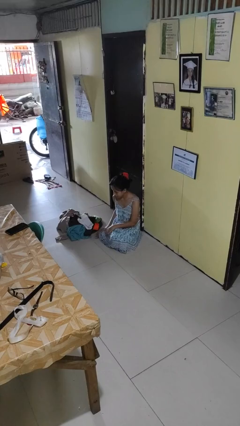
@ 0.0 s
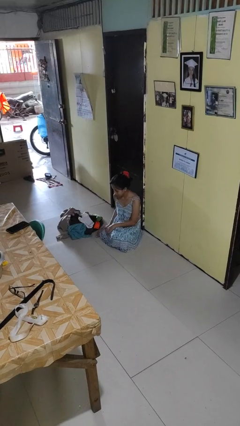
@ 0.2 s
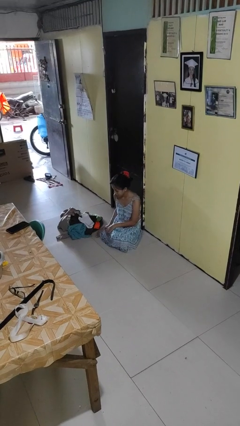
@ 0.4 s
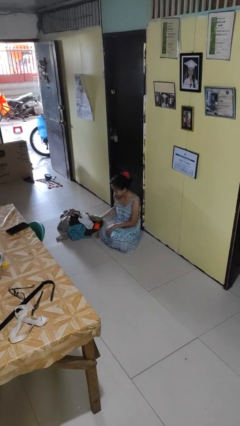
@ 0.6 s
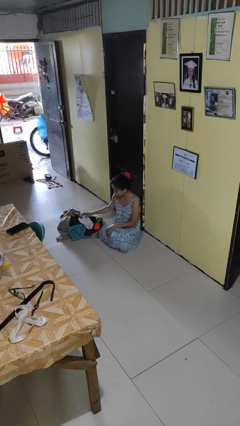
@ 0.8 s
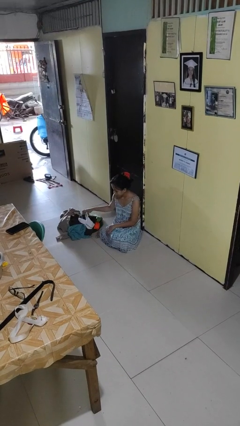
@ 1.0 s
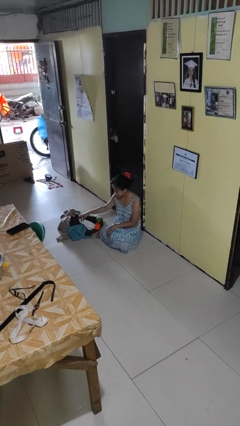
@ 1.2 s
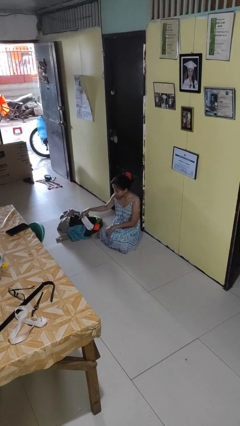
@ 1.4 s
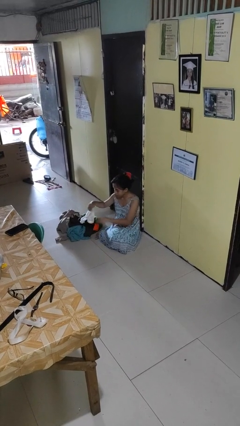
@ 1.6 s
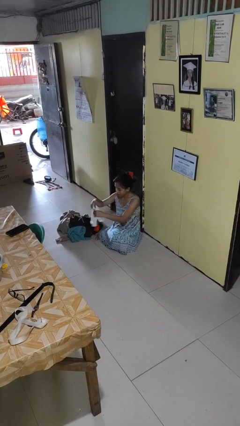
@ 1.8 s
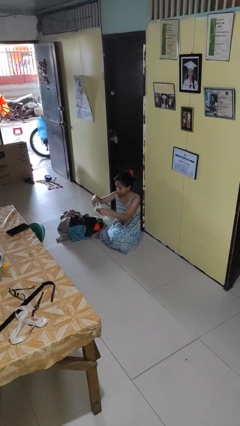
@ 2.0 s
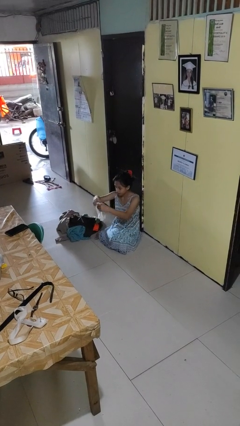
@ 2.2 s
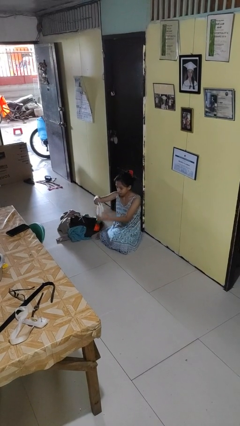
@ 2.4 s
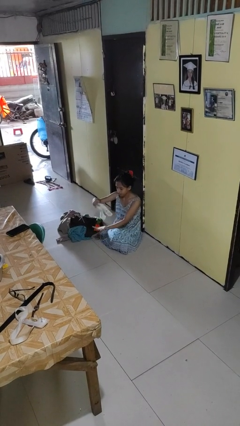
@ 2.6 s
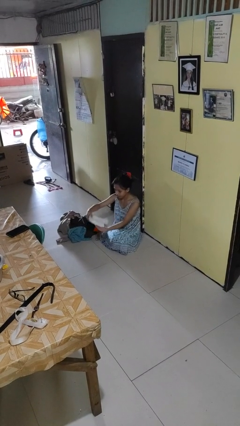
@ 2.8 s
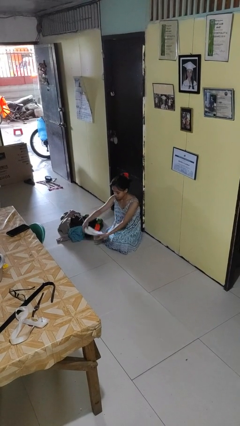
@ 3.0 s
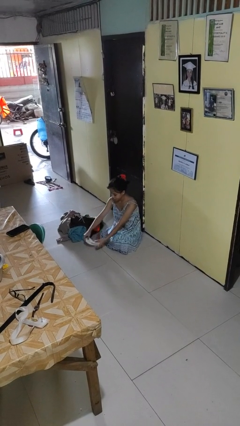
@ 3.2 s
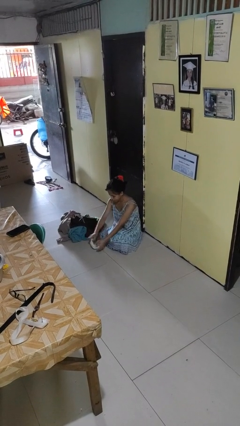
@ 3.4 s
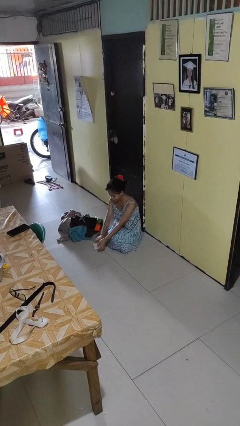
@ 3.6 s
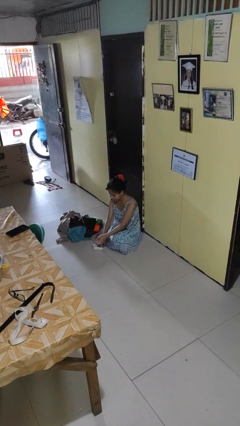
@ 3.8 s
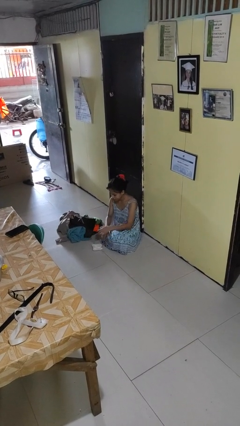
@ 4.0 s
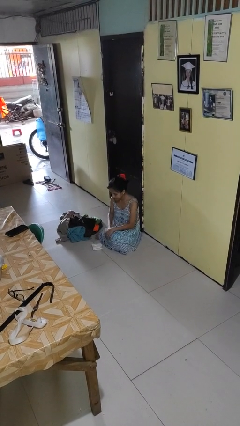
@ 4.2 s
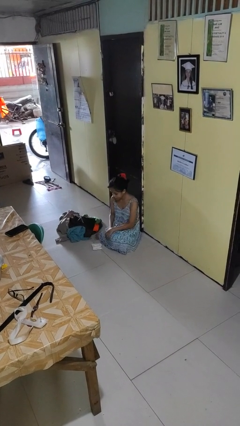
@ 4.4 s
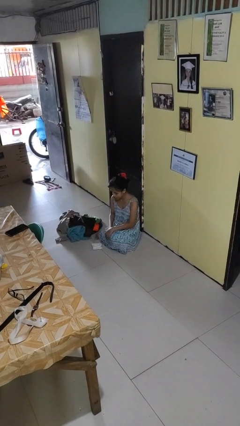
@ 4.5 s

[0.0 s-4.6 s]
person folds socks

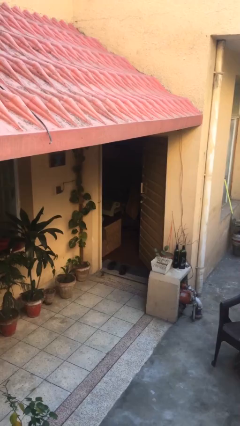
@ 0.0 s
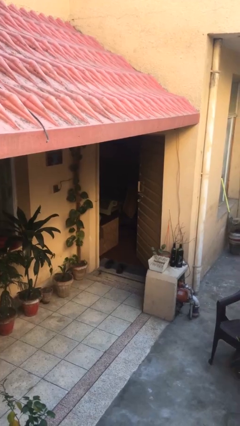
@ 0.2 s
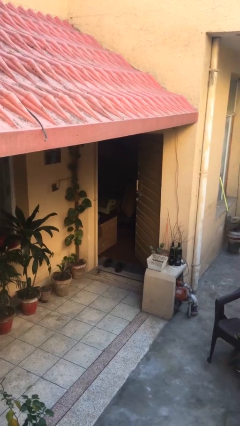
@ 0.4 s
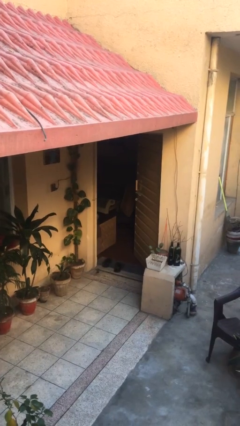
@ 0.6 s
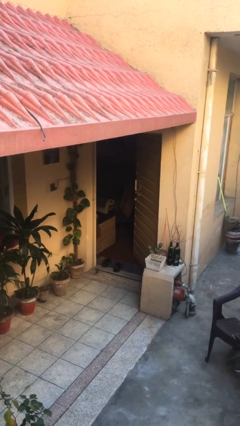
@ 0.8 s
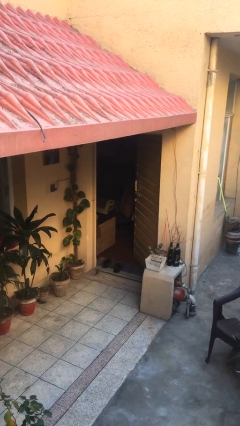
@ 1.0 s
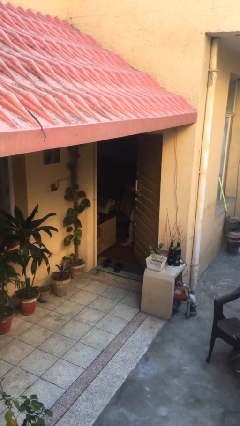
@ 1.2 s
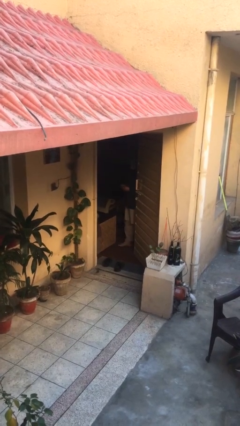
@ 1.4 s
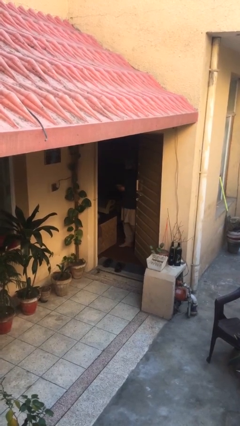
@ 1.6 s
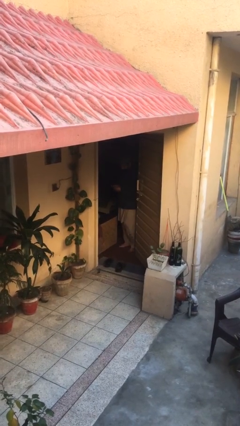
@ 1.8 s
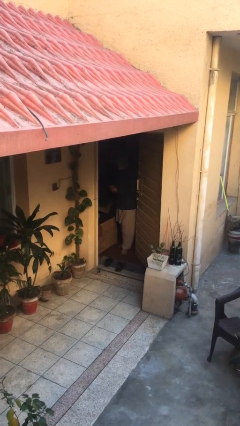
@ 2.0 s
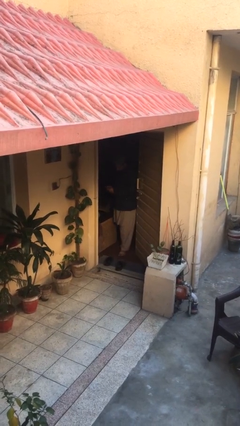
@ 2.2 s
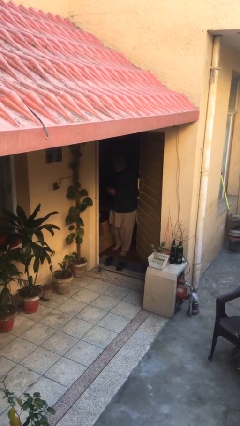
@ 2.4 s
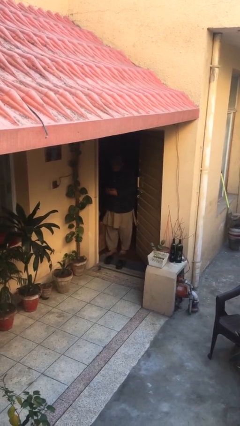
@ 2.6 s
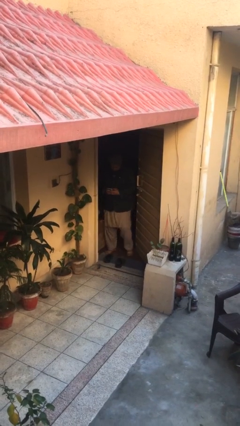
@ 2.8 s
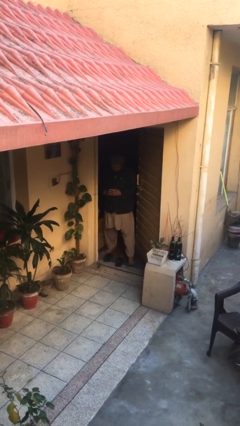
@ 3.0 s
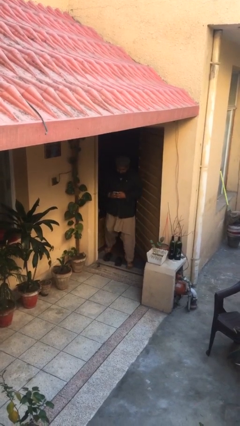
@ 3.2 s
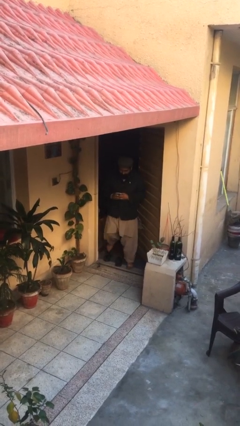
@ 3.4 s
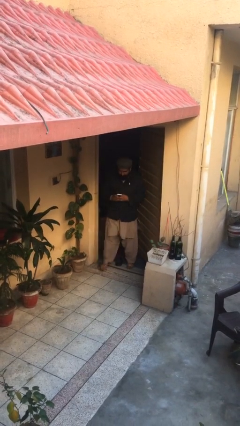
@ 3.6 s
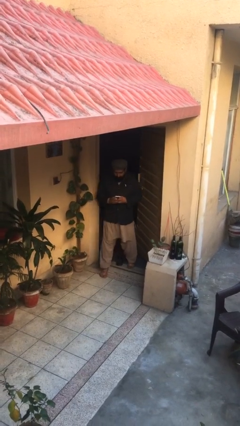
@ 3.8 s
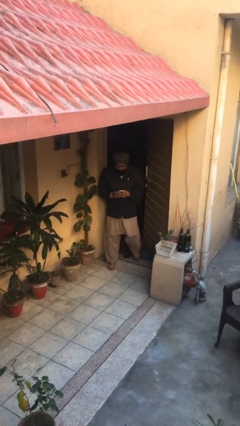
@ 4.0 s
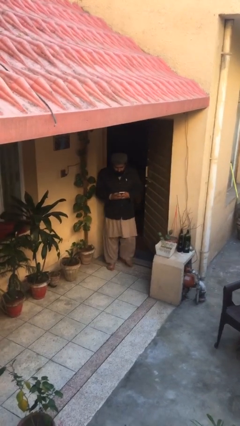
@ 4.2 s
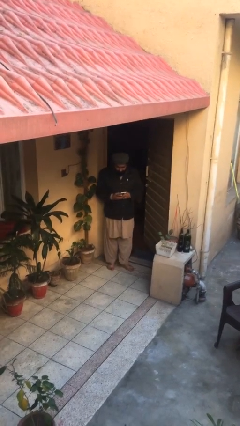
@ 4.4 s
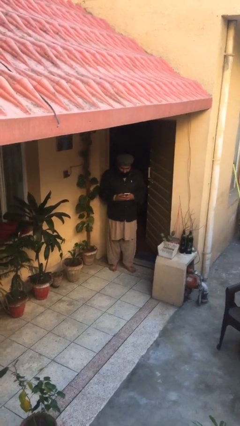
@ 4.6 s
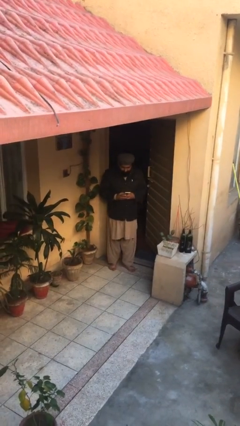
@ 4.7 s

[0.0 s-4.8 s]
person enters scene through structure

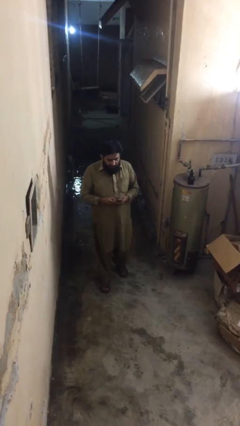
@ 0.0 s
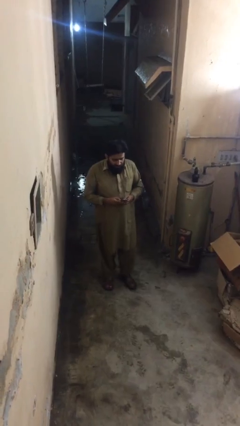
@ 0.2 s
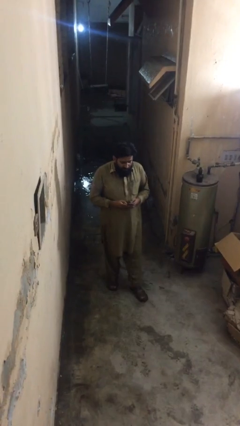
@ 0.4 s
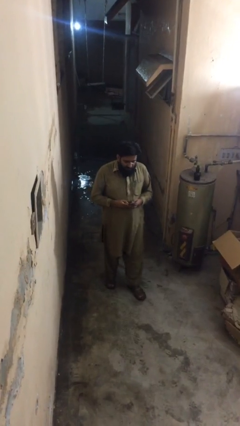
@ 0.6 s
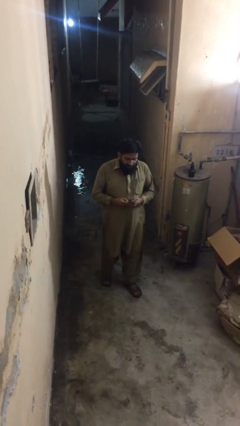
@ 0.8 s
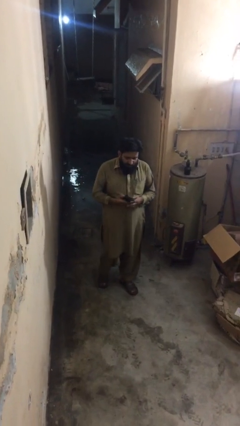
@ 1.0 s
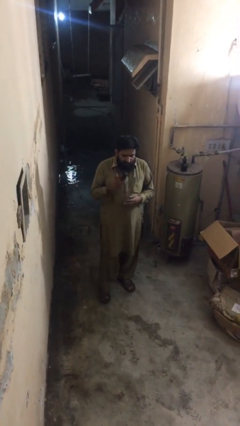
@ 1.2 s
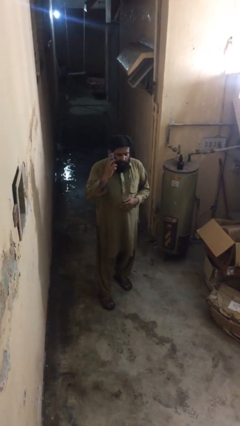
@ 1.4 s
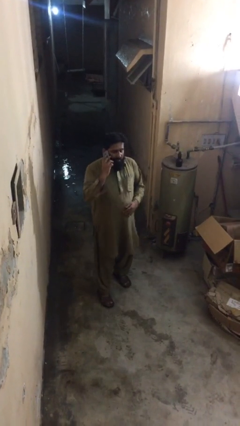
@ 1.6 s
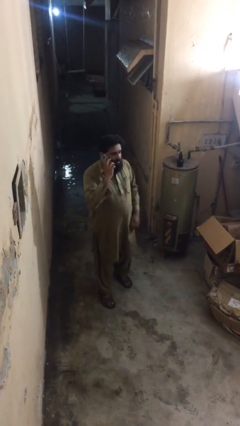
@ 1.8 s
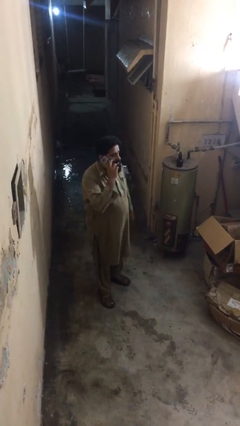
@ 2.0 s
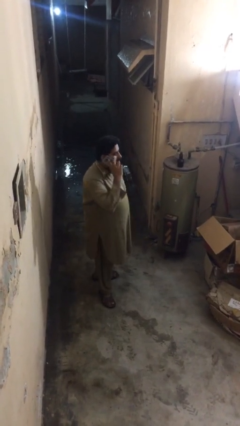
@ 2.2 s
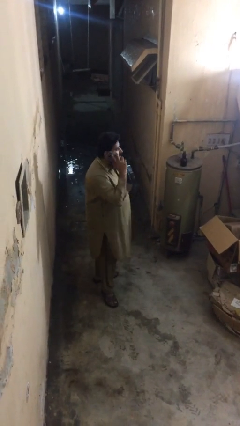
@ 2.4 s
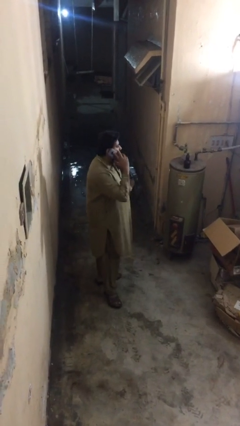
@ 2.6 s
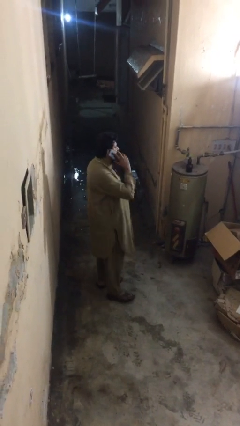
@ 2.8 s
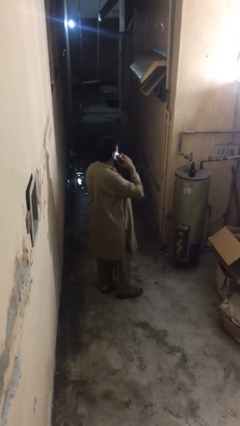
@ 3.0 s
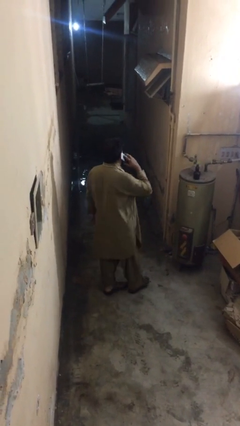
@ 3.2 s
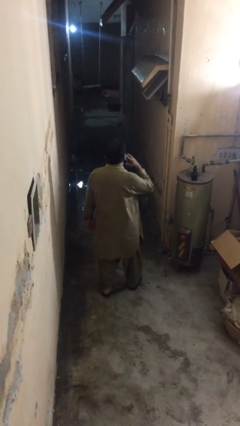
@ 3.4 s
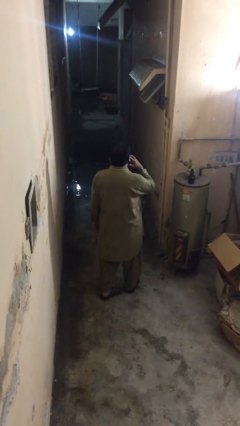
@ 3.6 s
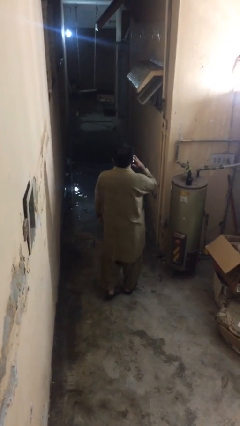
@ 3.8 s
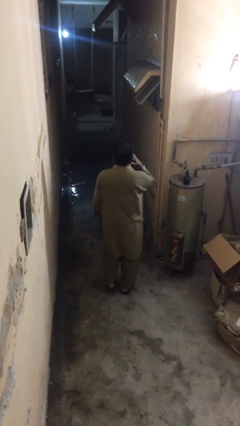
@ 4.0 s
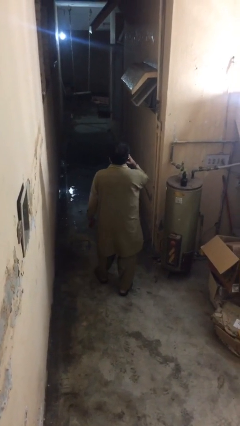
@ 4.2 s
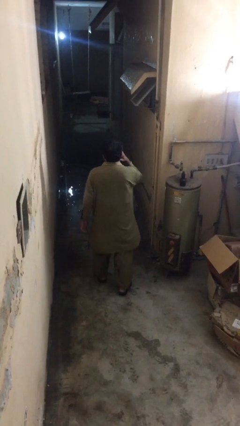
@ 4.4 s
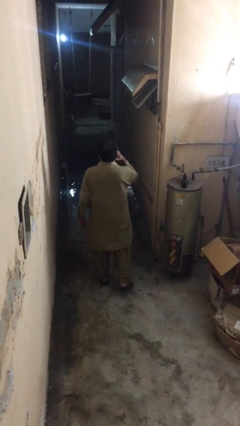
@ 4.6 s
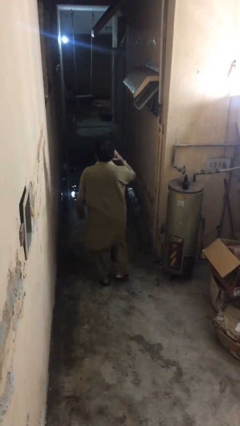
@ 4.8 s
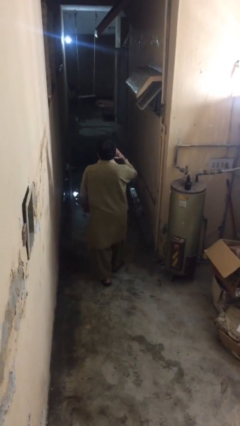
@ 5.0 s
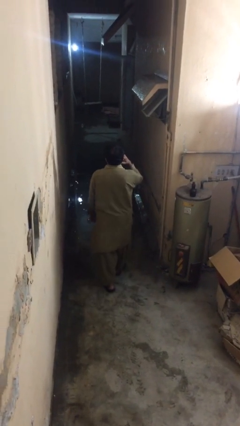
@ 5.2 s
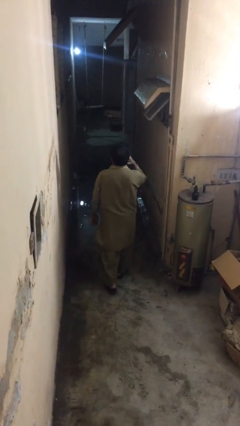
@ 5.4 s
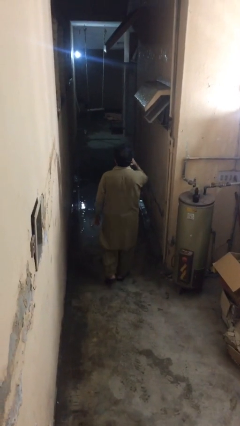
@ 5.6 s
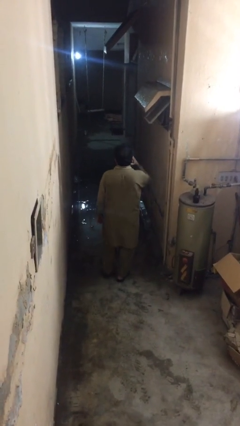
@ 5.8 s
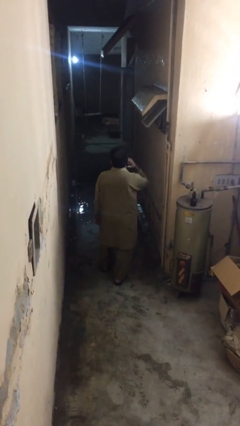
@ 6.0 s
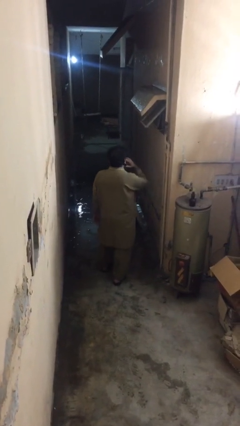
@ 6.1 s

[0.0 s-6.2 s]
person talks on phone

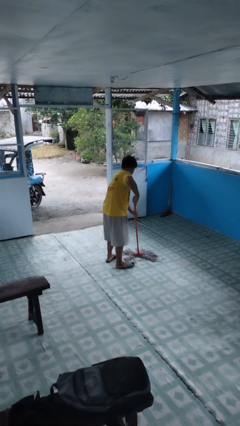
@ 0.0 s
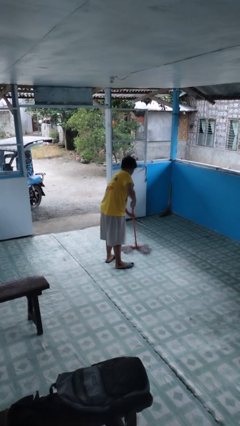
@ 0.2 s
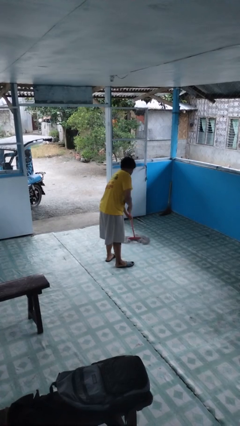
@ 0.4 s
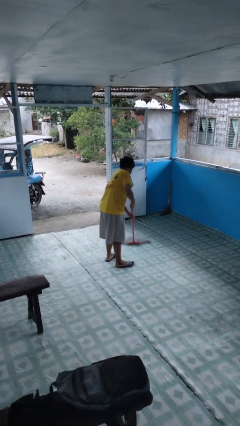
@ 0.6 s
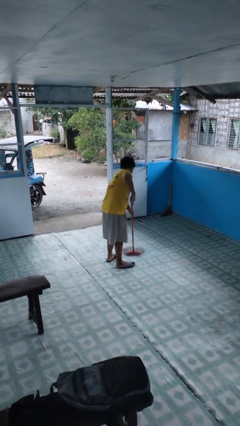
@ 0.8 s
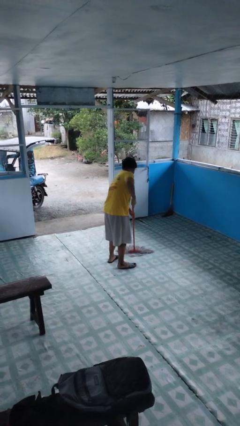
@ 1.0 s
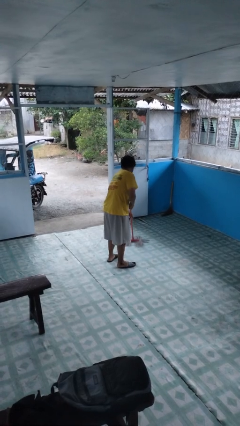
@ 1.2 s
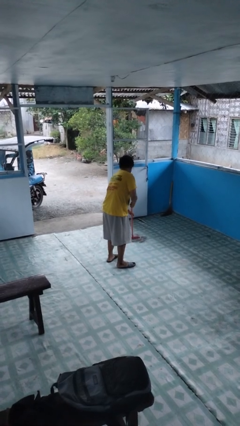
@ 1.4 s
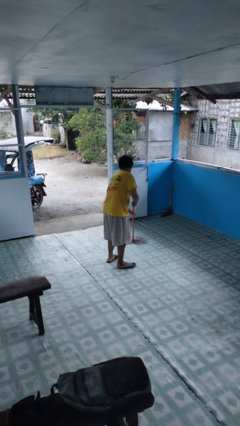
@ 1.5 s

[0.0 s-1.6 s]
person mops

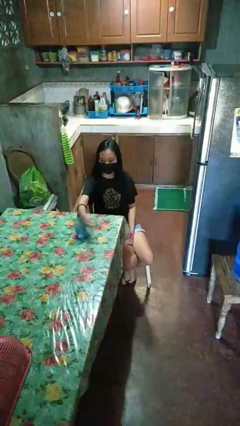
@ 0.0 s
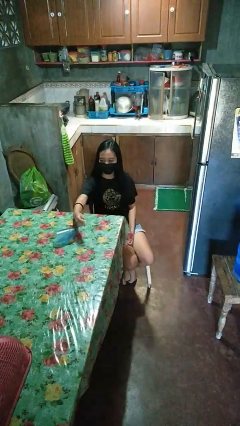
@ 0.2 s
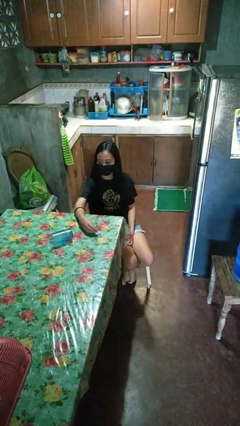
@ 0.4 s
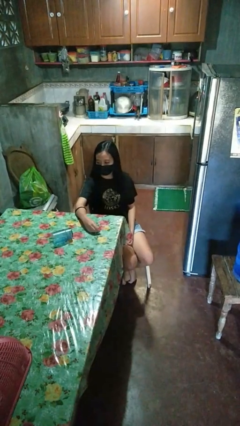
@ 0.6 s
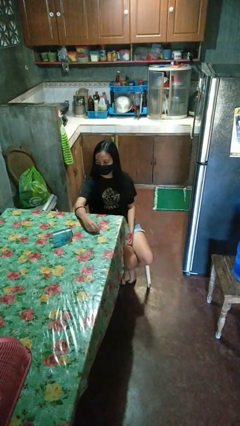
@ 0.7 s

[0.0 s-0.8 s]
person spills on table
